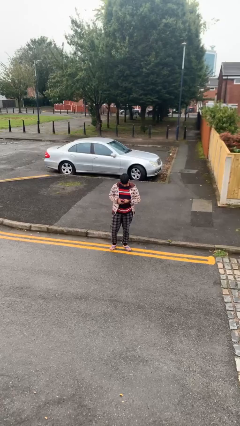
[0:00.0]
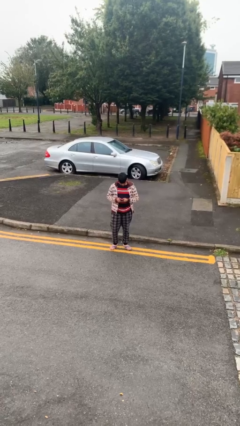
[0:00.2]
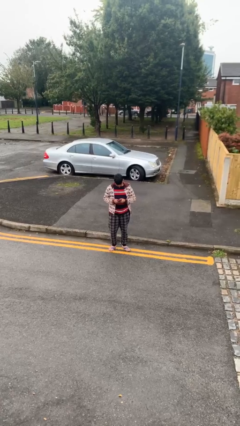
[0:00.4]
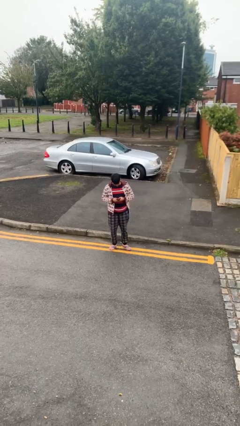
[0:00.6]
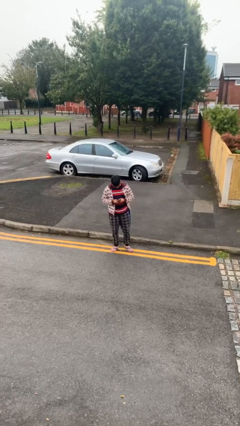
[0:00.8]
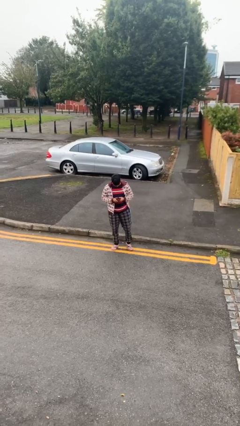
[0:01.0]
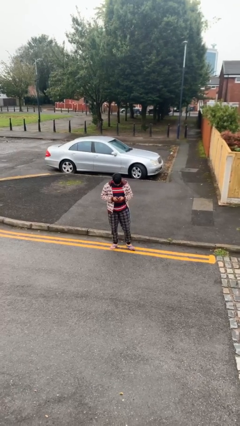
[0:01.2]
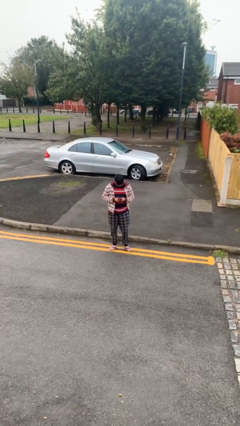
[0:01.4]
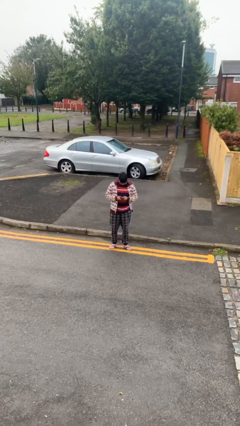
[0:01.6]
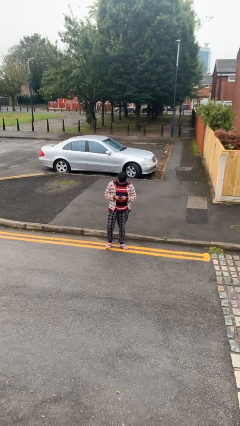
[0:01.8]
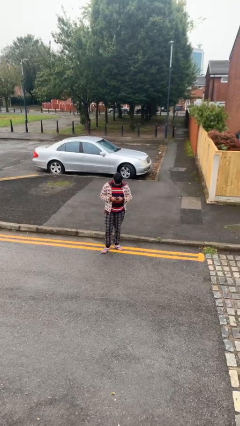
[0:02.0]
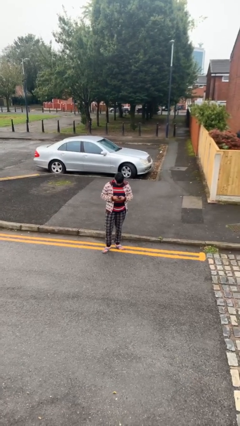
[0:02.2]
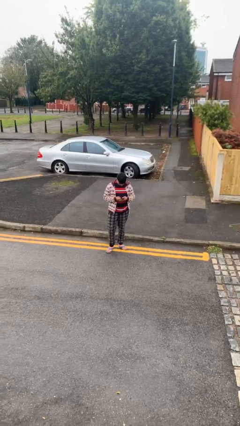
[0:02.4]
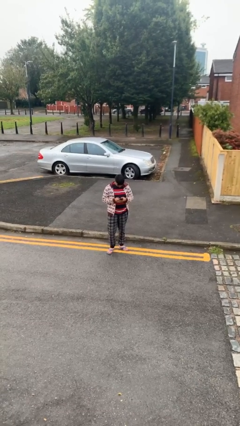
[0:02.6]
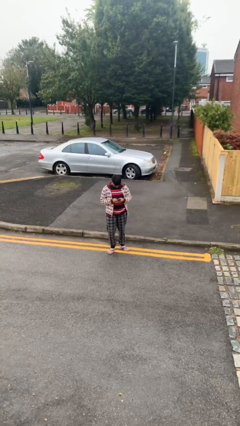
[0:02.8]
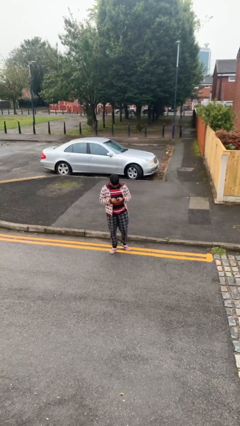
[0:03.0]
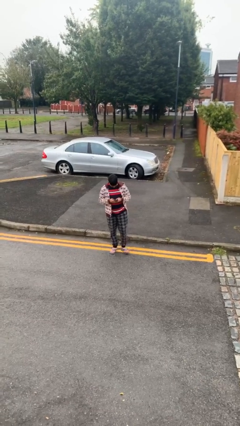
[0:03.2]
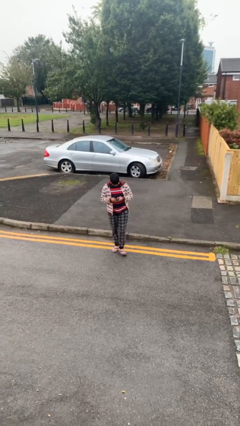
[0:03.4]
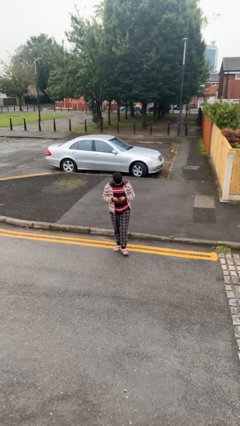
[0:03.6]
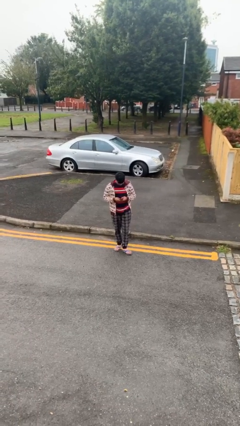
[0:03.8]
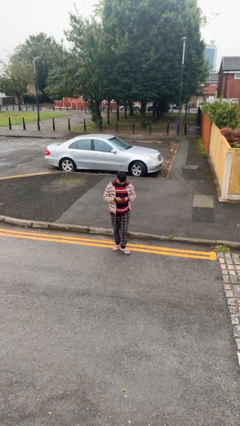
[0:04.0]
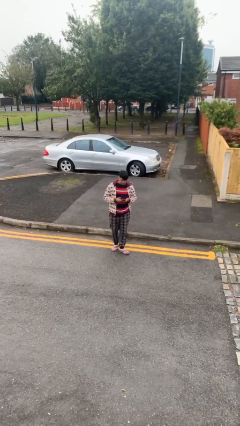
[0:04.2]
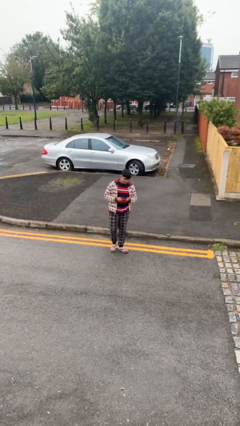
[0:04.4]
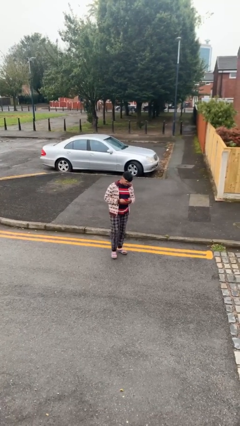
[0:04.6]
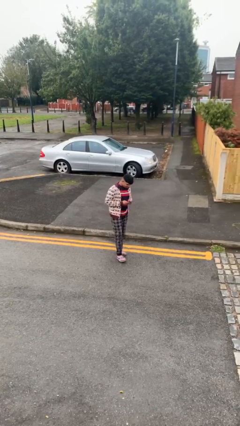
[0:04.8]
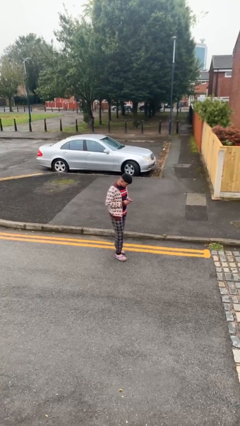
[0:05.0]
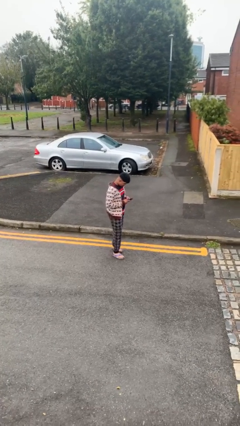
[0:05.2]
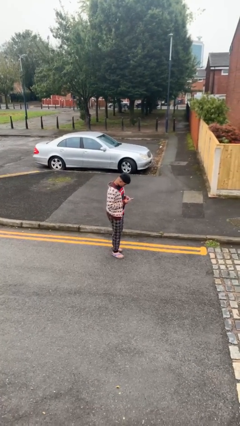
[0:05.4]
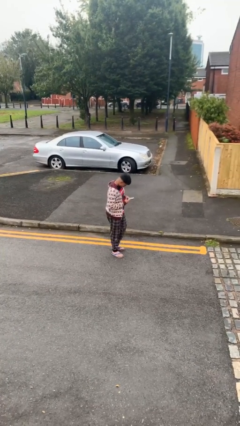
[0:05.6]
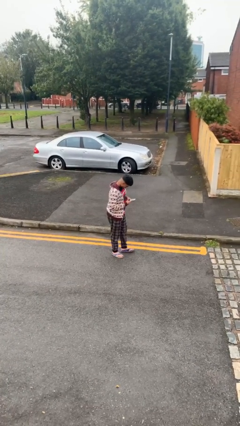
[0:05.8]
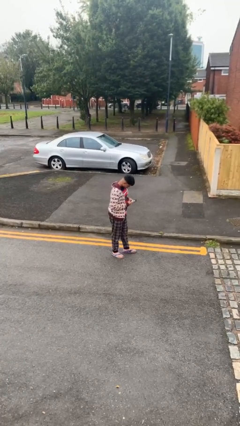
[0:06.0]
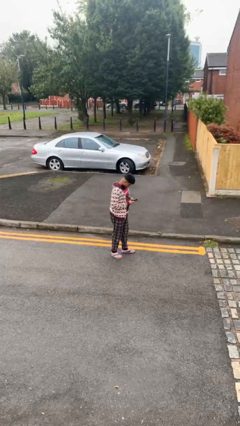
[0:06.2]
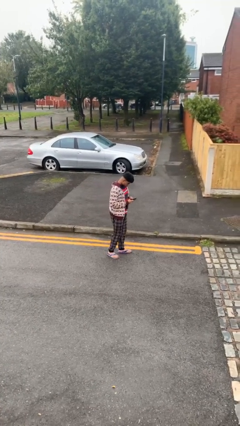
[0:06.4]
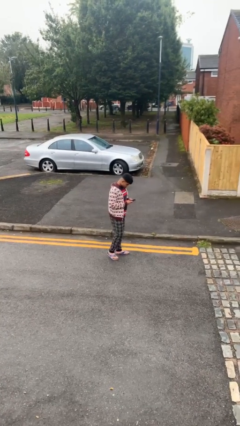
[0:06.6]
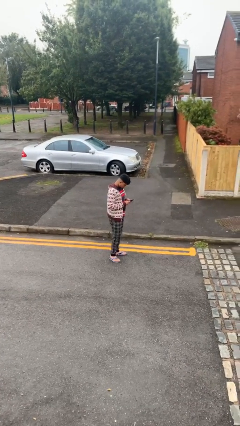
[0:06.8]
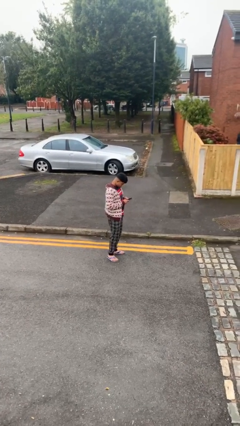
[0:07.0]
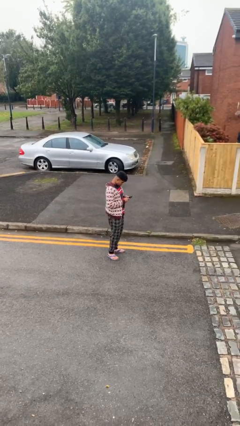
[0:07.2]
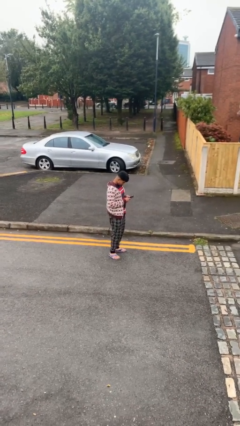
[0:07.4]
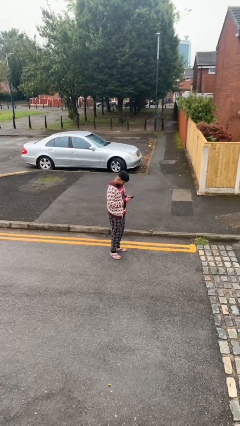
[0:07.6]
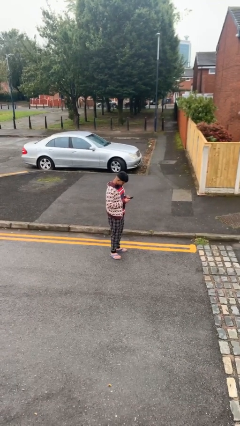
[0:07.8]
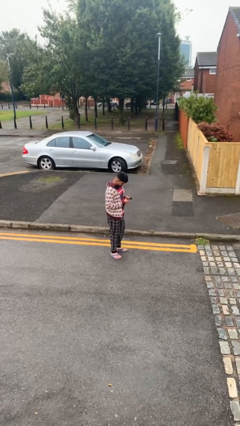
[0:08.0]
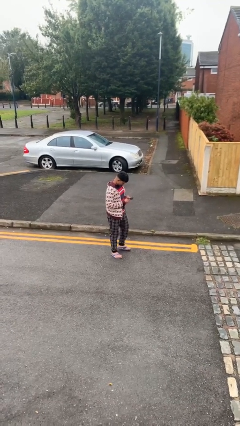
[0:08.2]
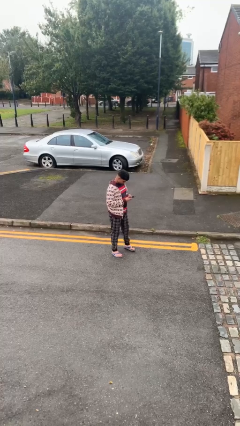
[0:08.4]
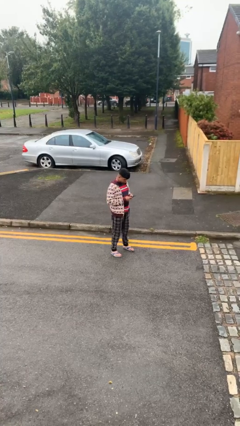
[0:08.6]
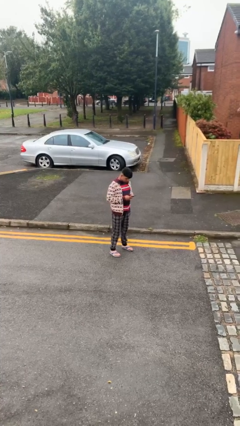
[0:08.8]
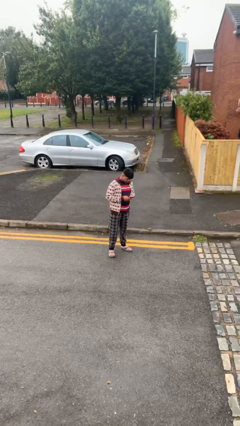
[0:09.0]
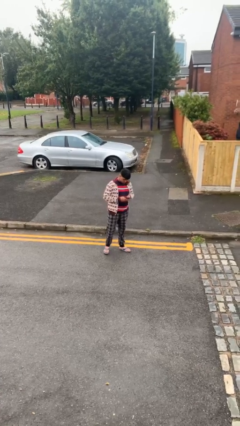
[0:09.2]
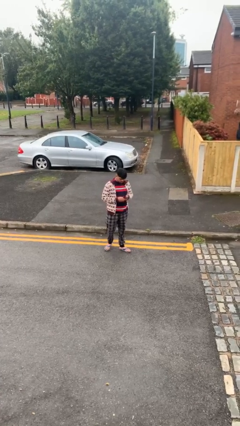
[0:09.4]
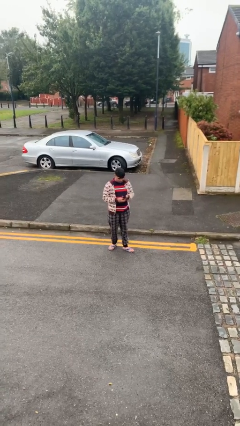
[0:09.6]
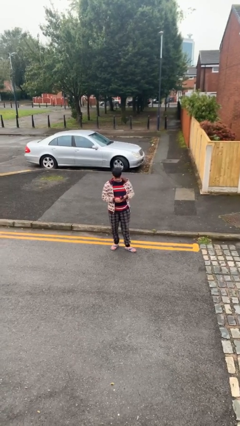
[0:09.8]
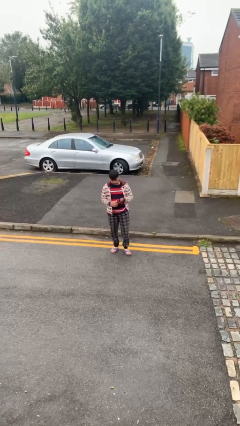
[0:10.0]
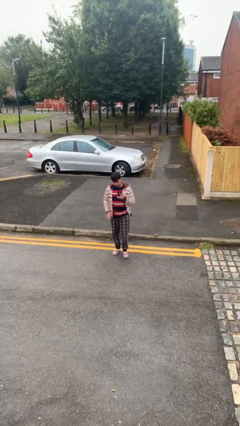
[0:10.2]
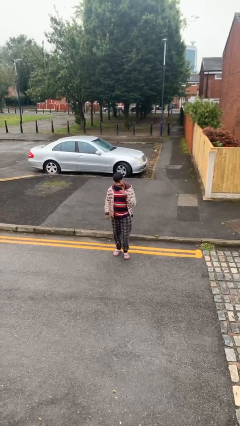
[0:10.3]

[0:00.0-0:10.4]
person texts on phone

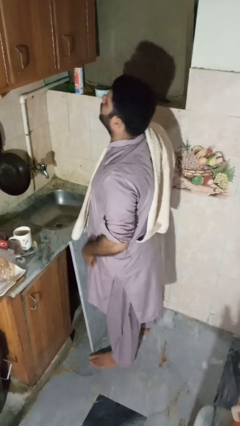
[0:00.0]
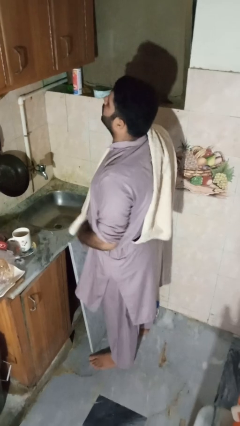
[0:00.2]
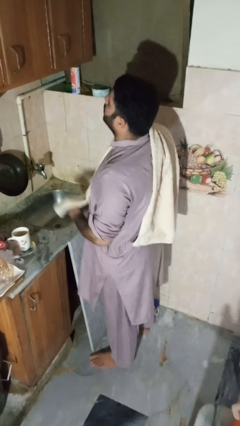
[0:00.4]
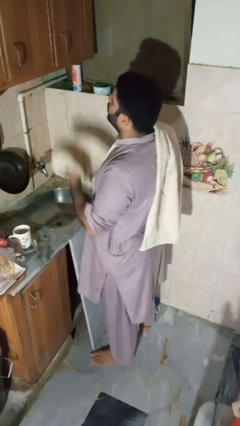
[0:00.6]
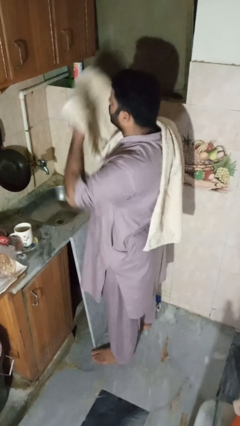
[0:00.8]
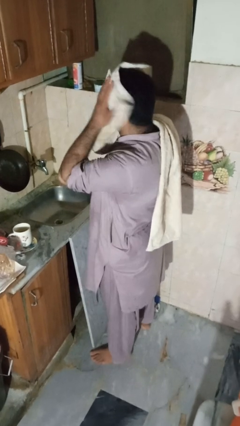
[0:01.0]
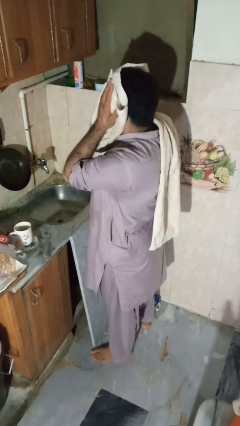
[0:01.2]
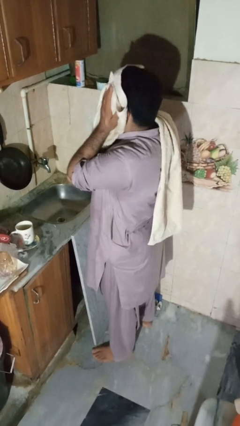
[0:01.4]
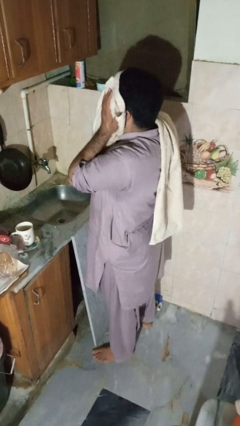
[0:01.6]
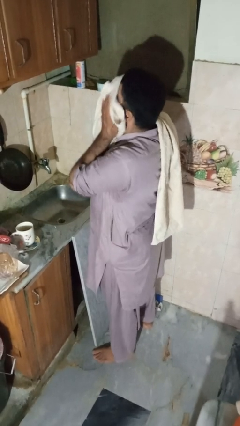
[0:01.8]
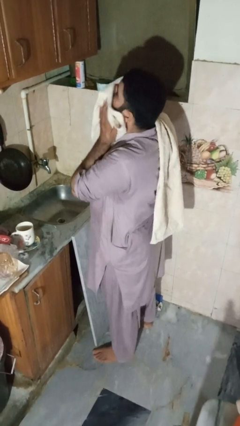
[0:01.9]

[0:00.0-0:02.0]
person dries face with towel

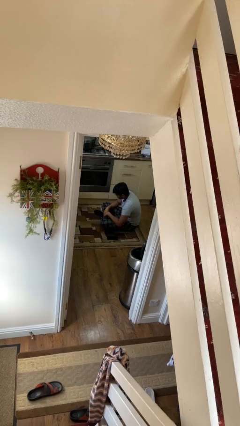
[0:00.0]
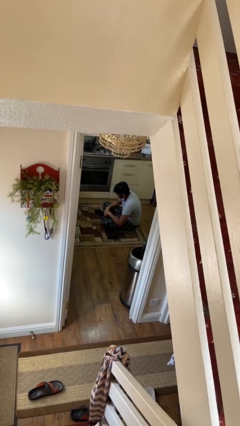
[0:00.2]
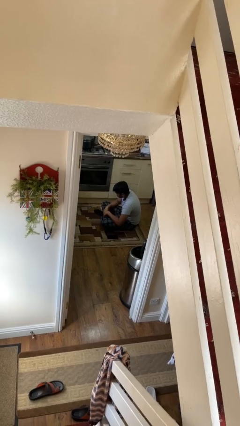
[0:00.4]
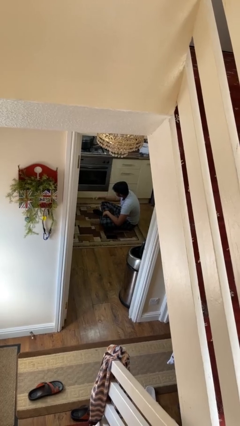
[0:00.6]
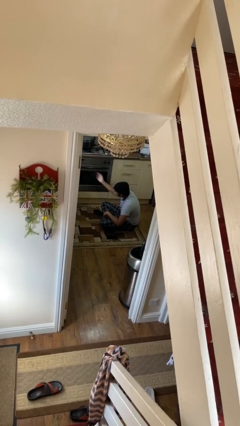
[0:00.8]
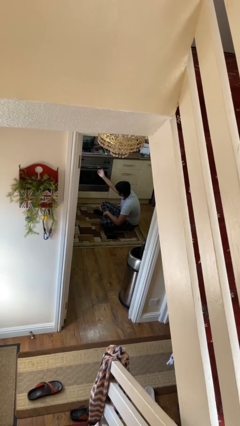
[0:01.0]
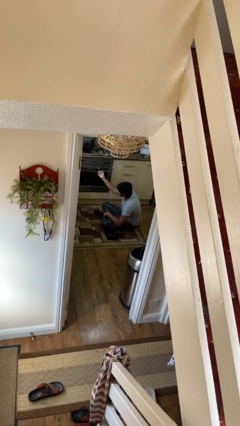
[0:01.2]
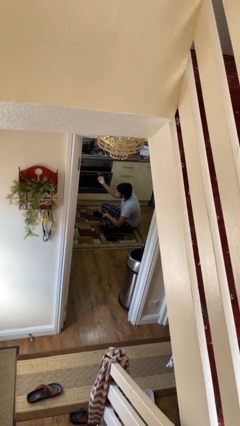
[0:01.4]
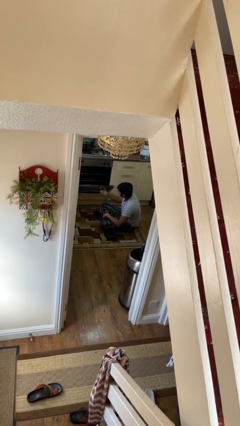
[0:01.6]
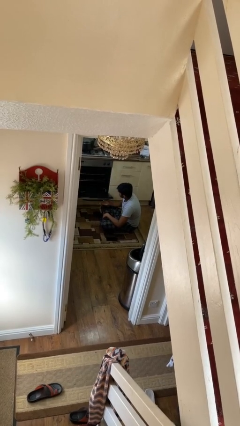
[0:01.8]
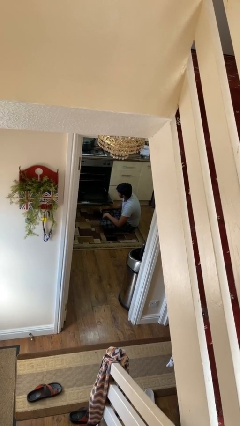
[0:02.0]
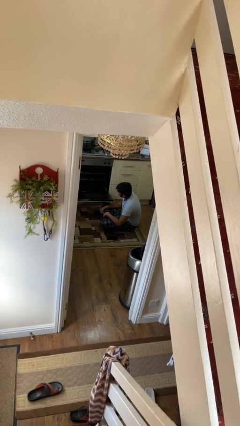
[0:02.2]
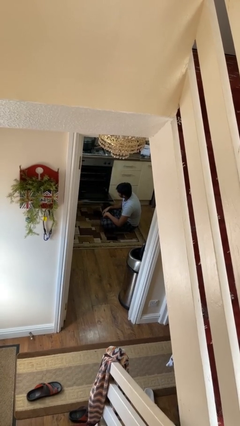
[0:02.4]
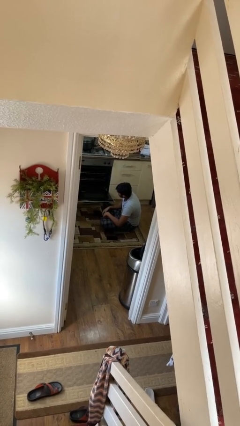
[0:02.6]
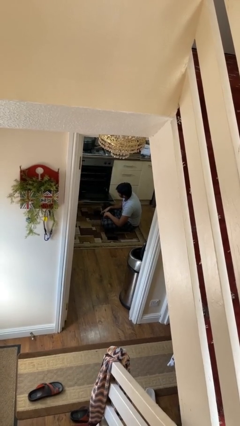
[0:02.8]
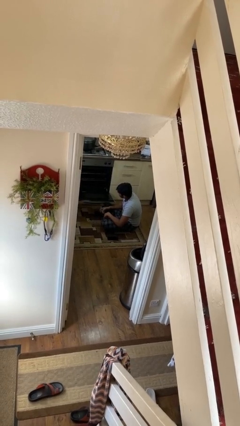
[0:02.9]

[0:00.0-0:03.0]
person opens oven door

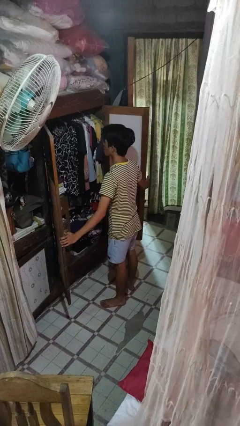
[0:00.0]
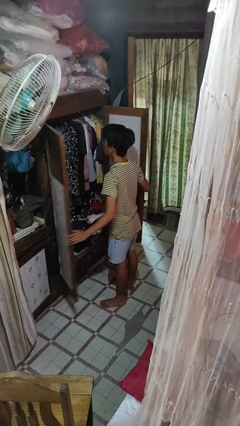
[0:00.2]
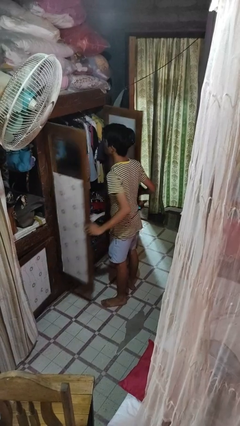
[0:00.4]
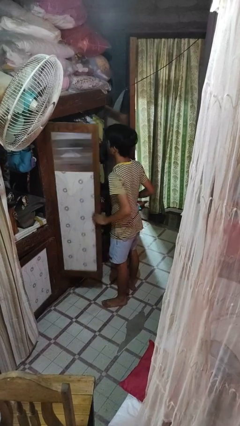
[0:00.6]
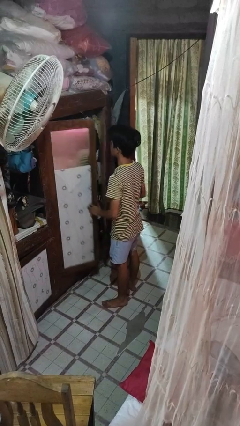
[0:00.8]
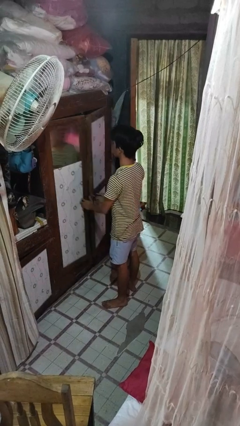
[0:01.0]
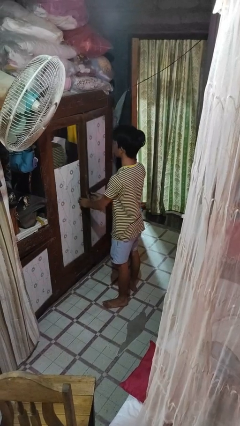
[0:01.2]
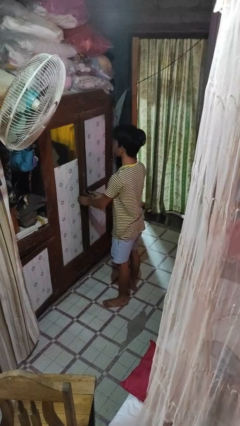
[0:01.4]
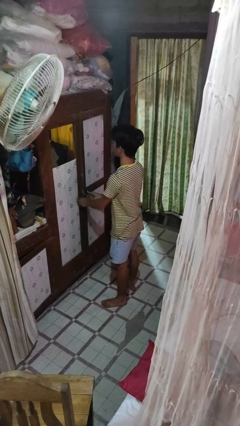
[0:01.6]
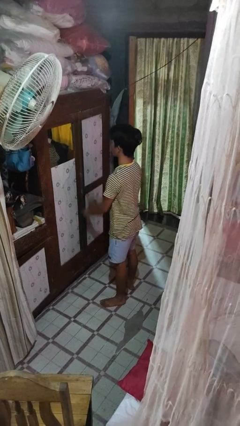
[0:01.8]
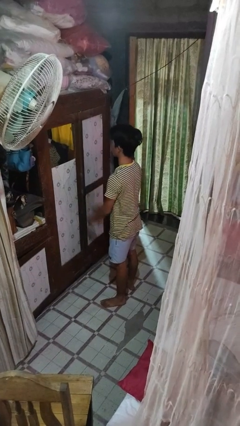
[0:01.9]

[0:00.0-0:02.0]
person closes closet door

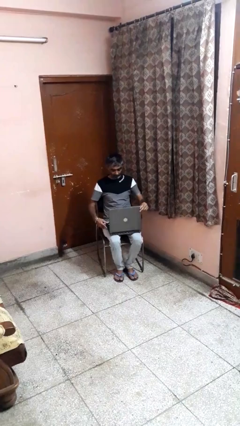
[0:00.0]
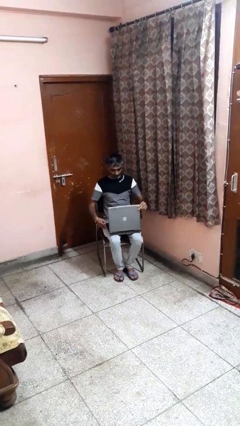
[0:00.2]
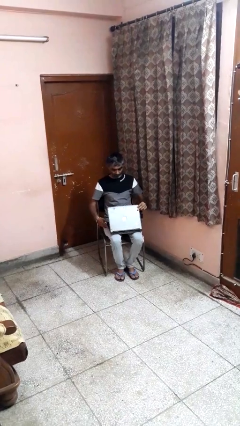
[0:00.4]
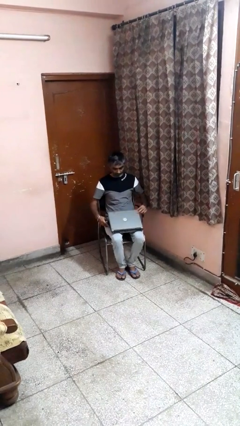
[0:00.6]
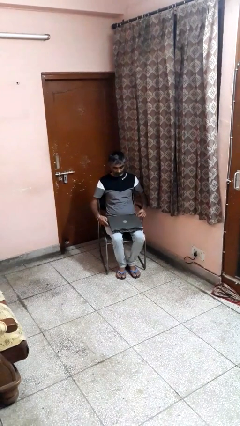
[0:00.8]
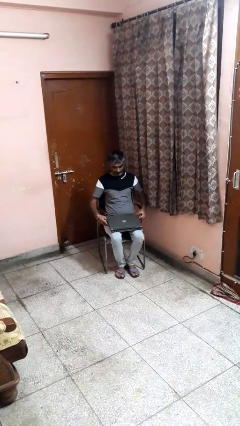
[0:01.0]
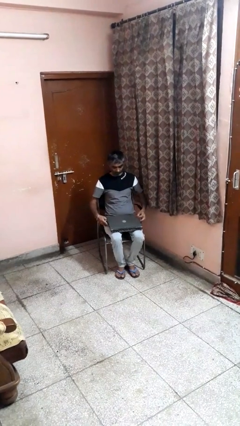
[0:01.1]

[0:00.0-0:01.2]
person closes laptop
